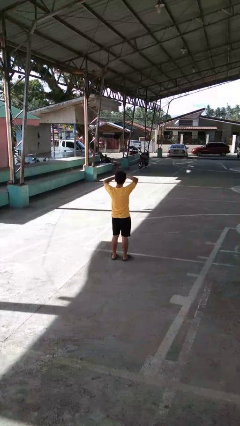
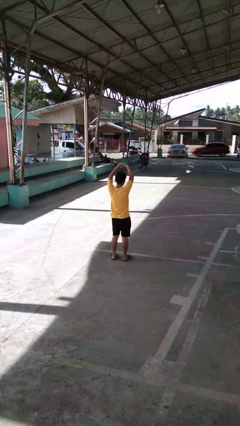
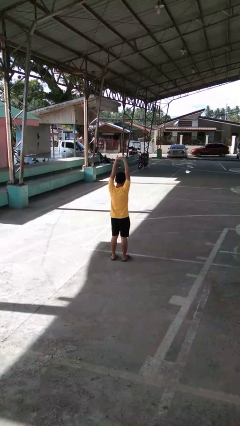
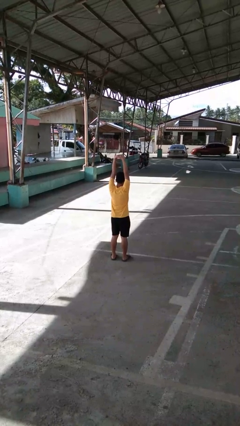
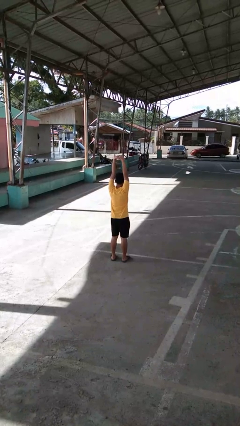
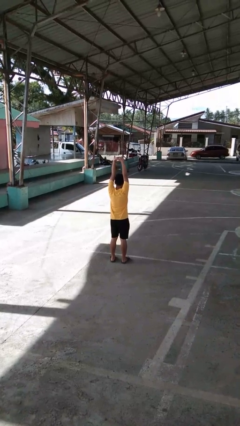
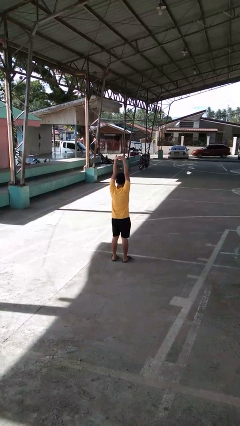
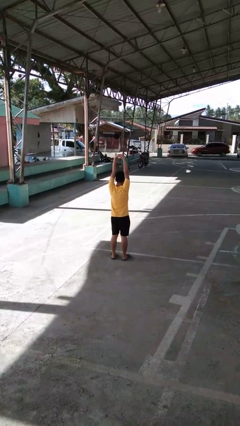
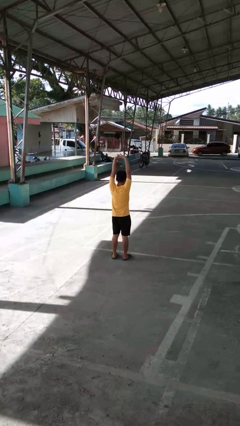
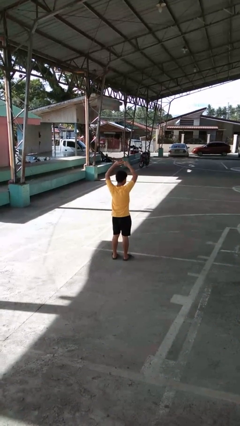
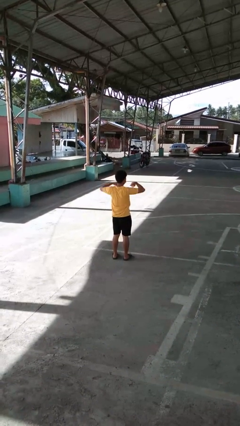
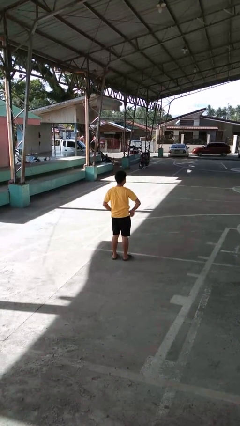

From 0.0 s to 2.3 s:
person stretches arms over head

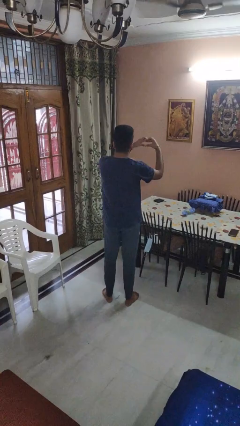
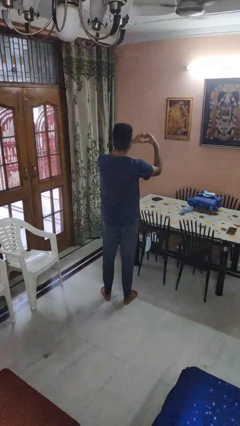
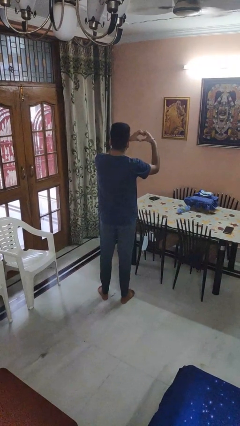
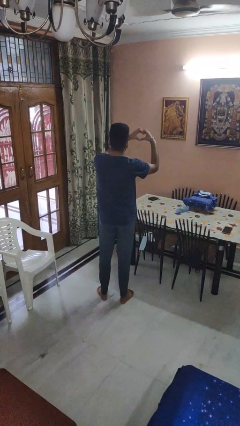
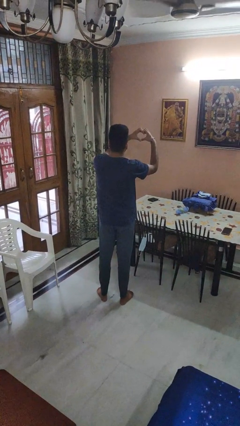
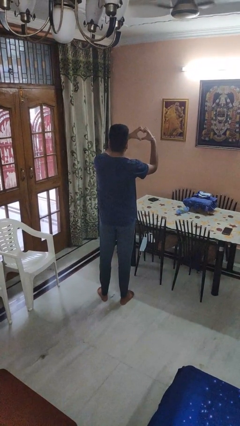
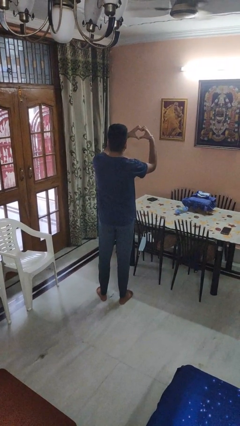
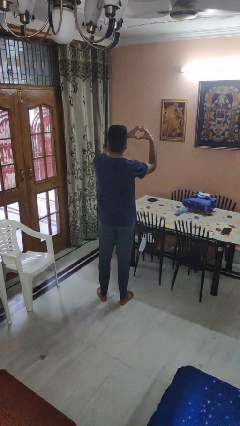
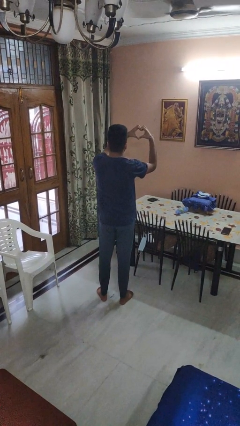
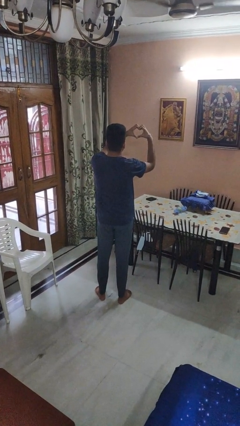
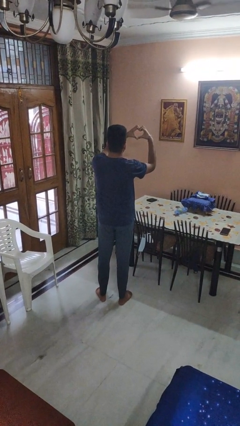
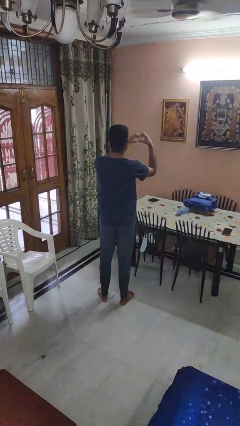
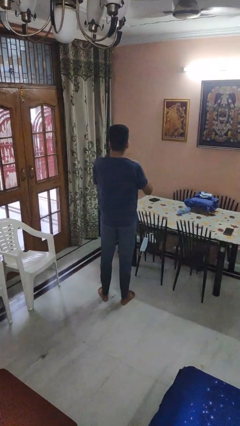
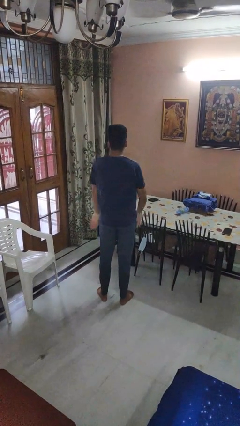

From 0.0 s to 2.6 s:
person gestures heart

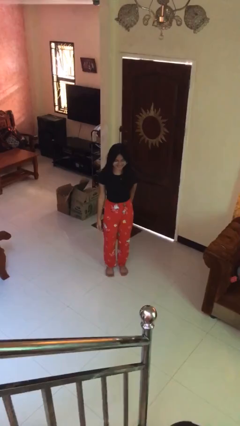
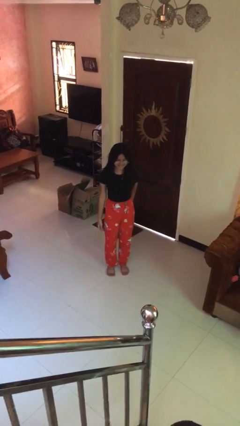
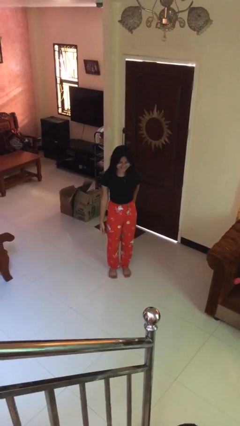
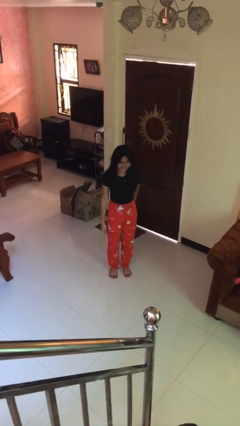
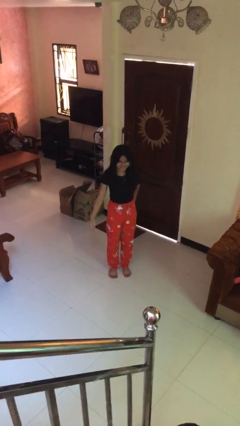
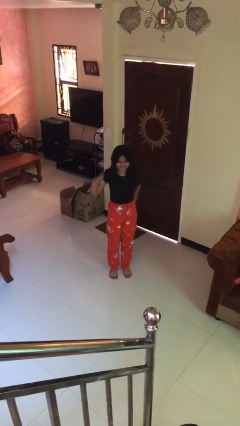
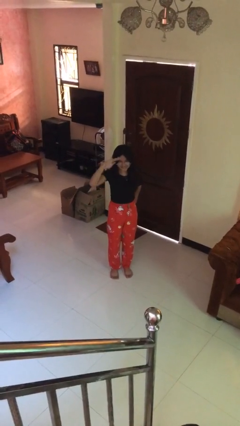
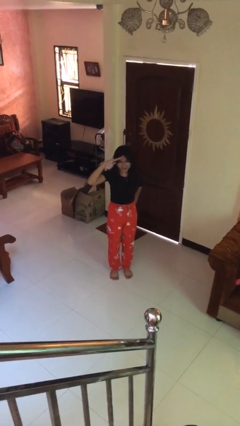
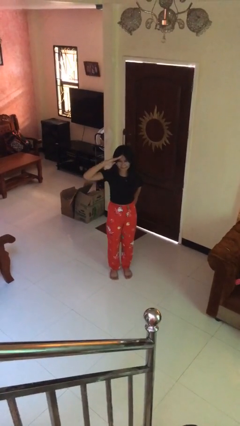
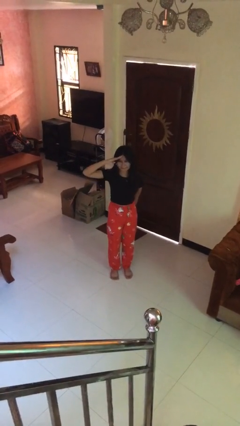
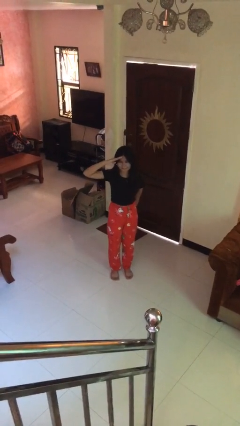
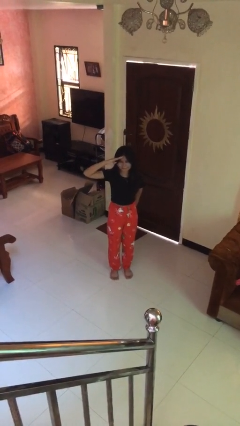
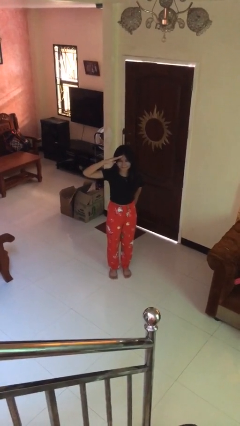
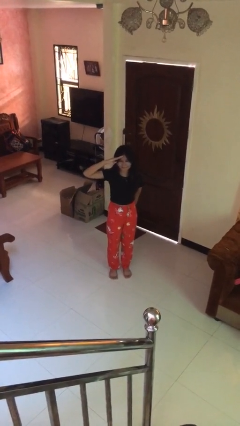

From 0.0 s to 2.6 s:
person salutes

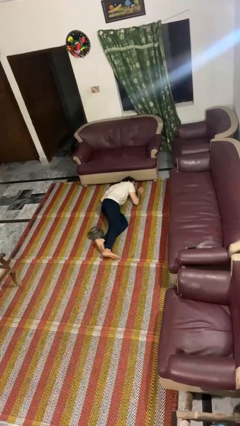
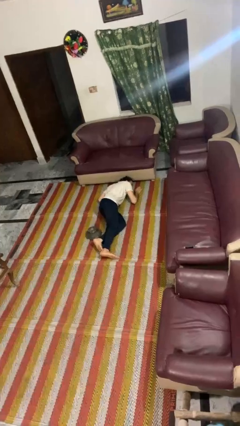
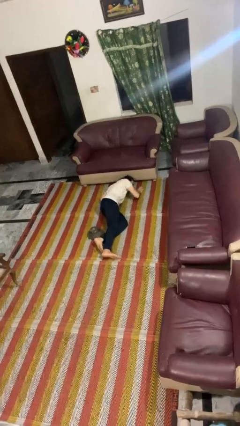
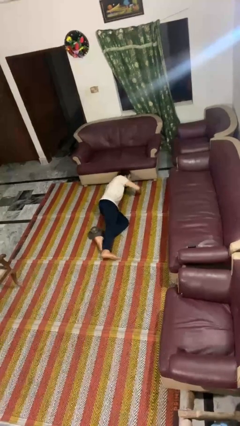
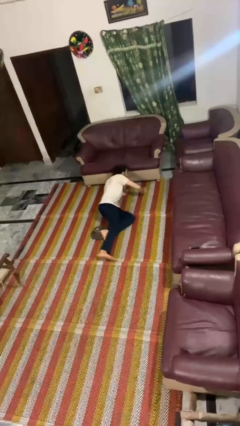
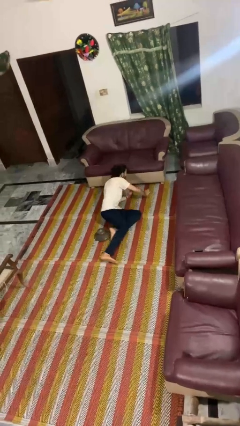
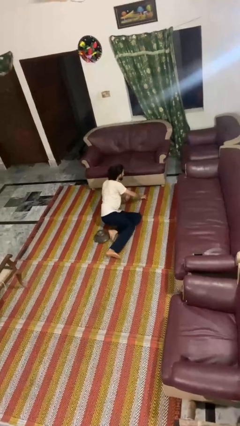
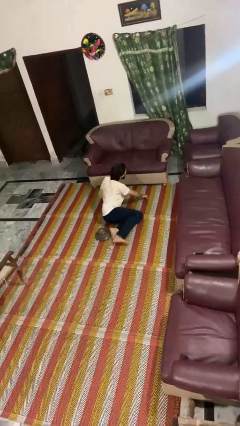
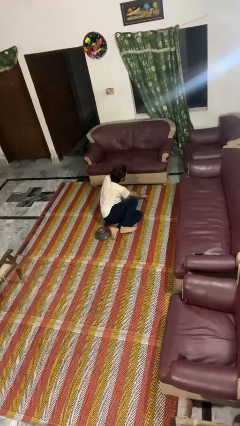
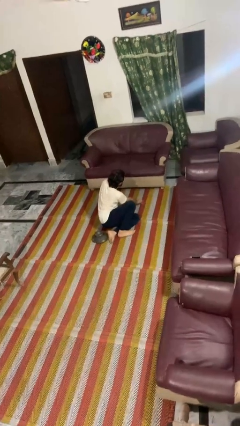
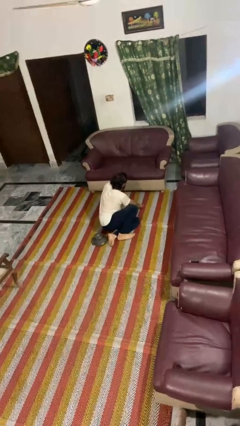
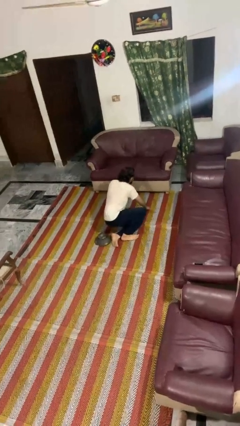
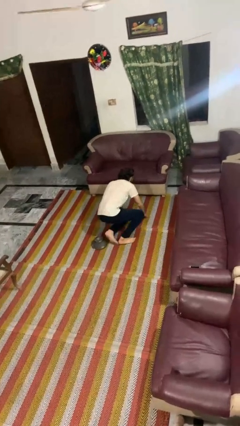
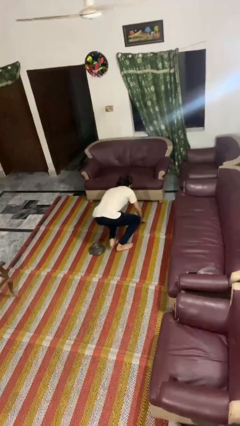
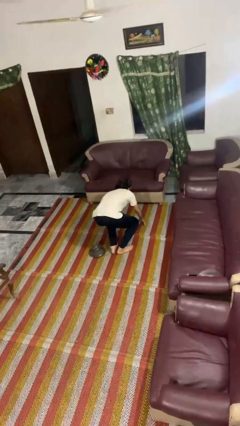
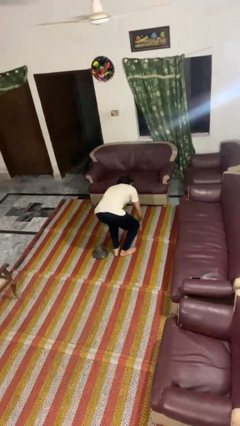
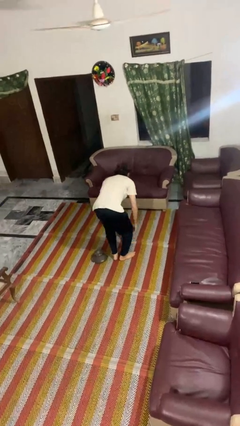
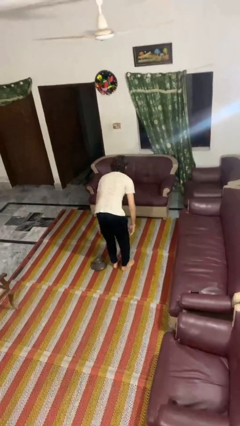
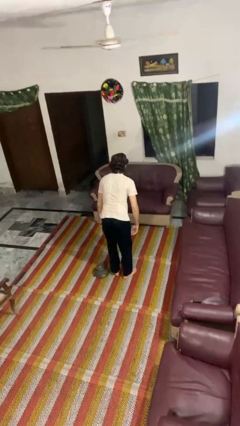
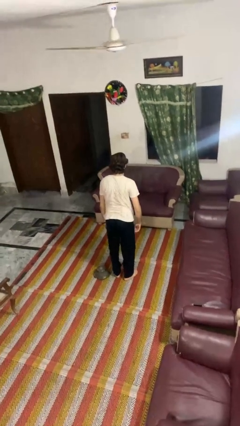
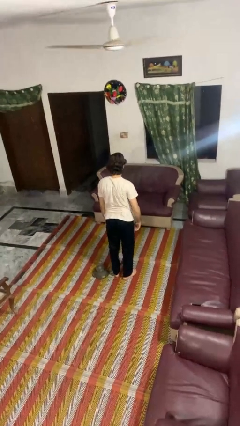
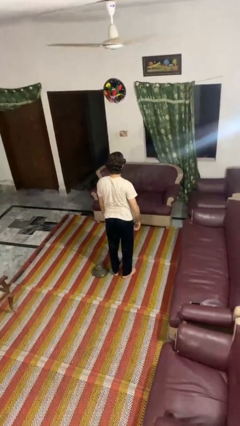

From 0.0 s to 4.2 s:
person stands up from floor

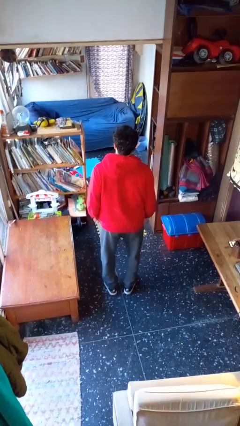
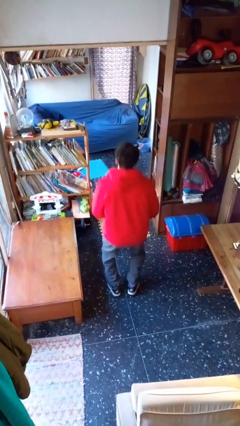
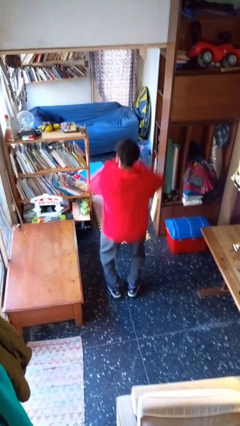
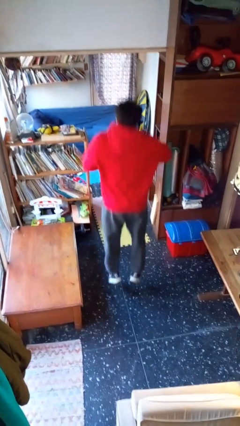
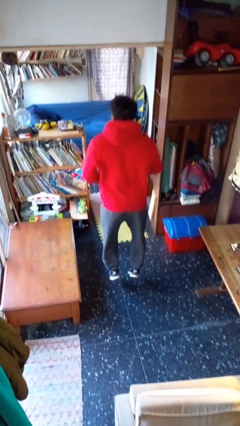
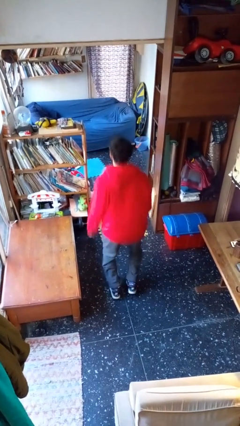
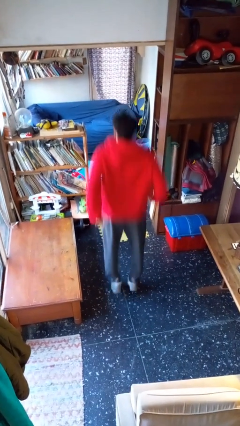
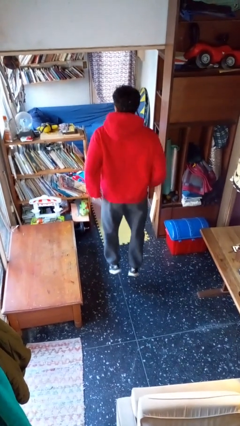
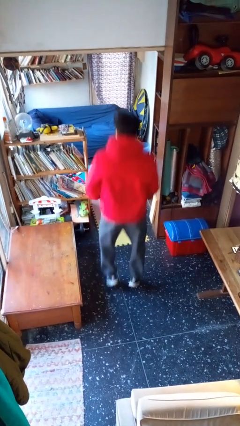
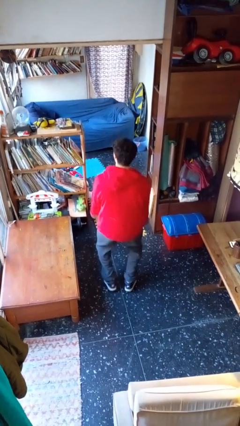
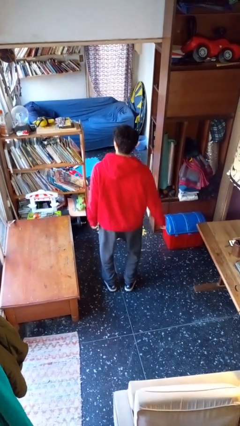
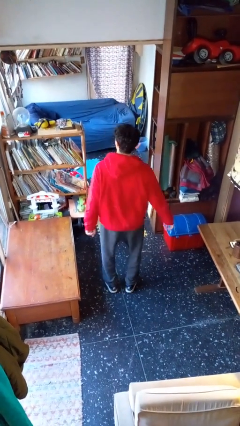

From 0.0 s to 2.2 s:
person jumps

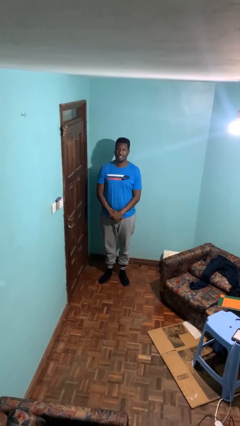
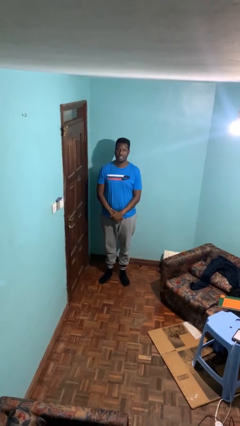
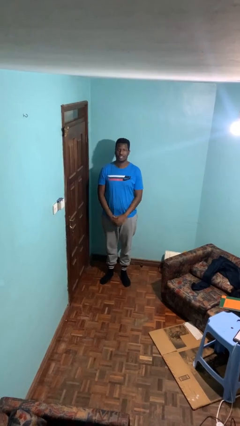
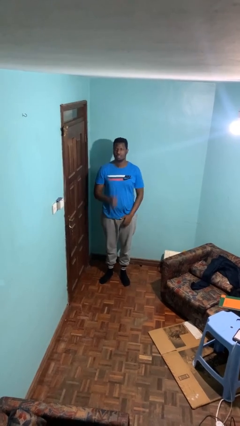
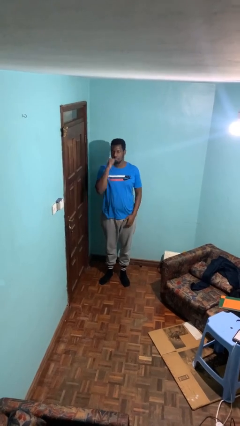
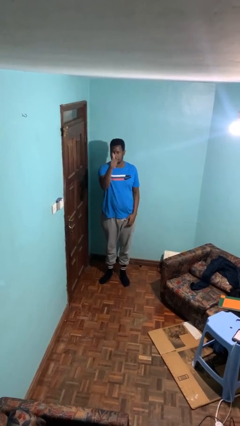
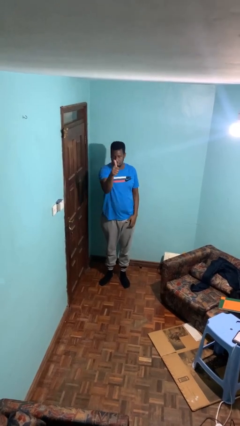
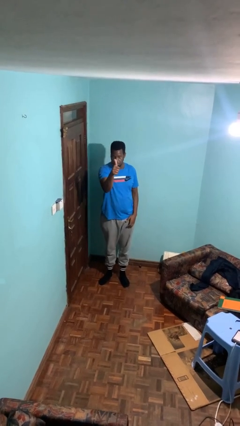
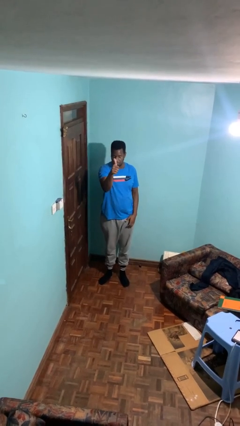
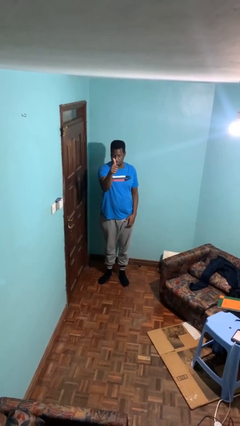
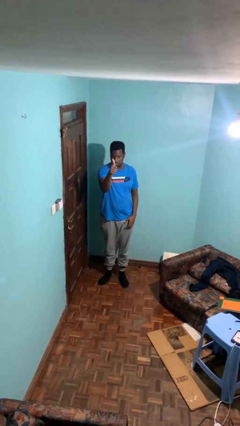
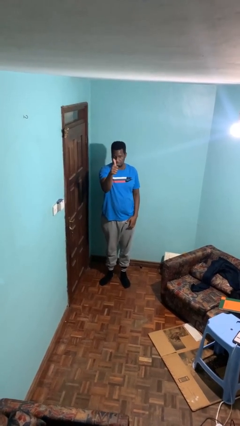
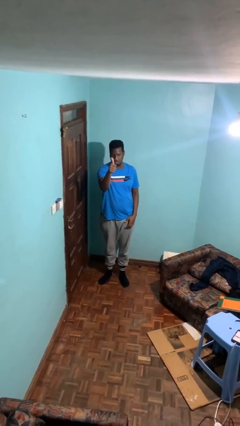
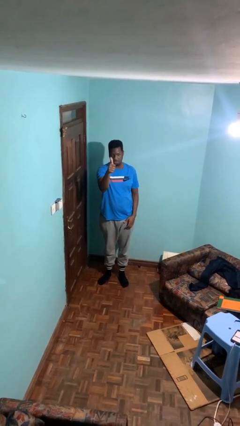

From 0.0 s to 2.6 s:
person gestures thumbs up

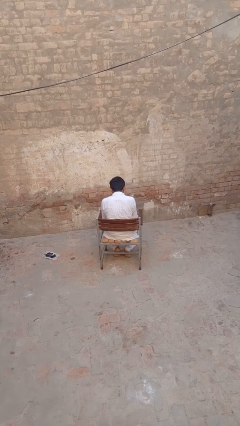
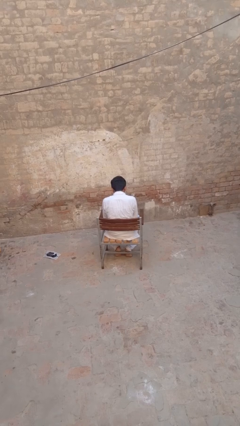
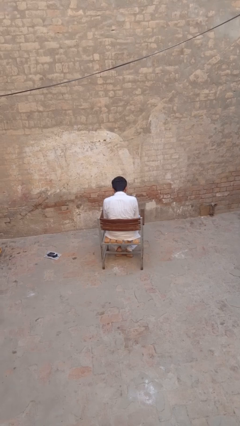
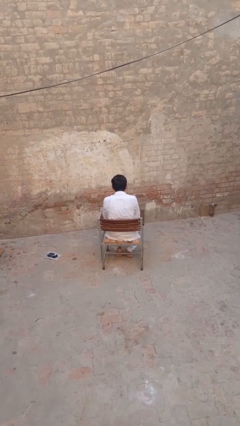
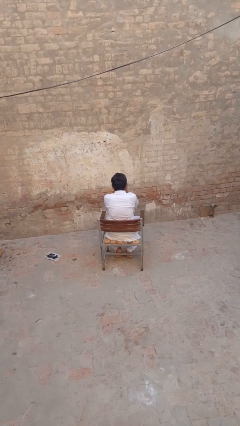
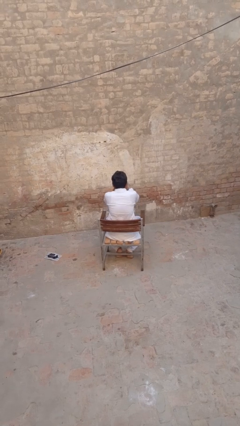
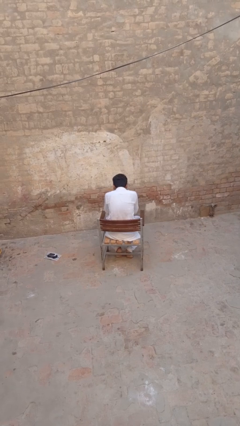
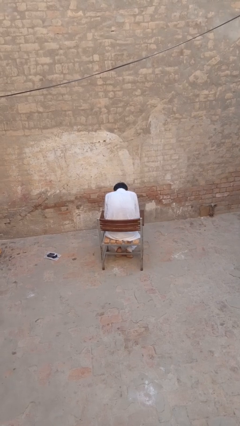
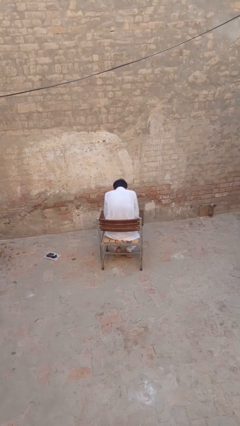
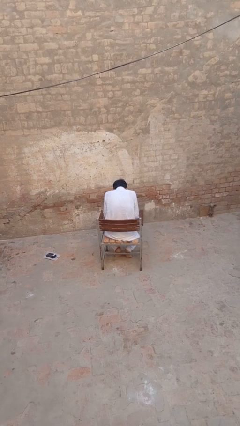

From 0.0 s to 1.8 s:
person sneezes into hand
